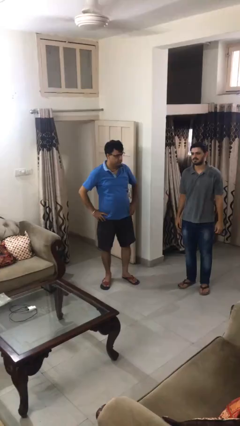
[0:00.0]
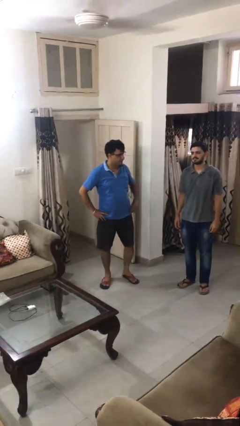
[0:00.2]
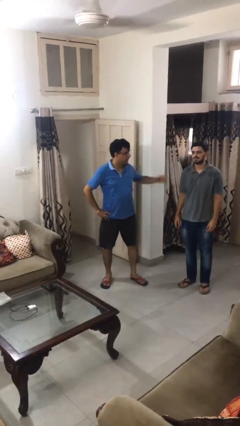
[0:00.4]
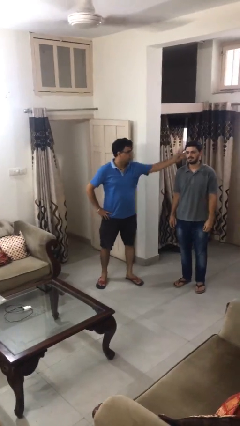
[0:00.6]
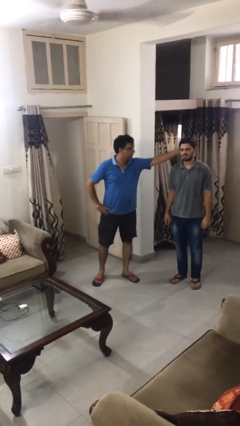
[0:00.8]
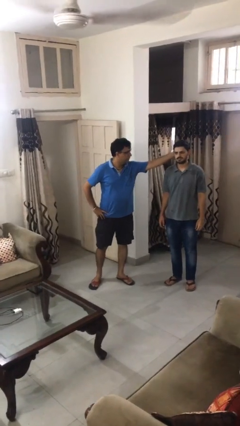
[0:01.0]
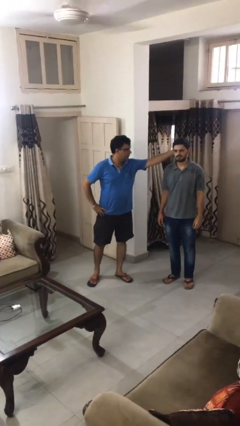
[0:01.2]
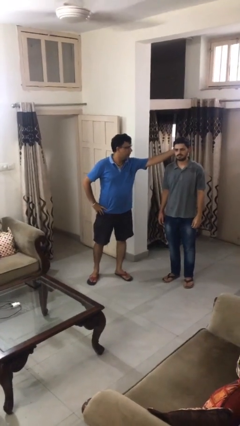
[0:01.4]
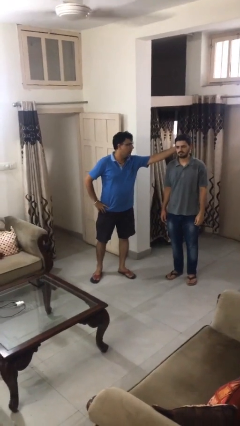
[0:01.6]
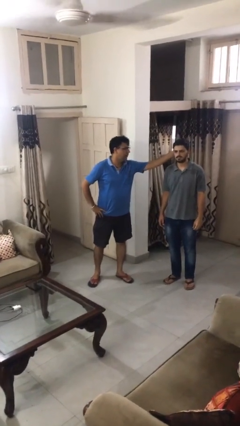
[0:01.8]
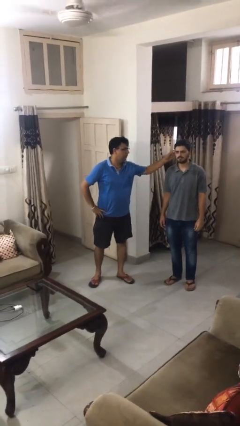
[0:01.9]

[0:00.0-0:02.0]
person grabs person by hair

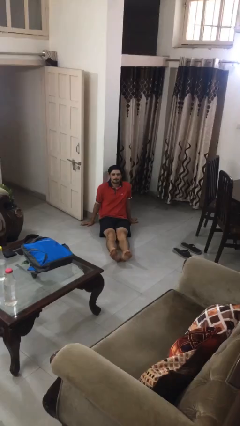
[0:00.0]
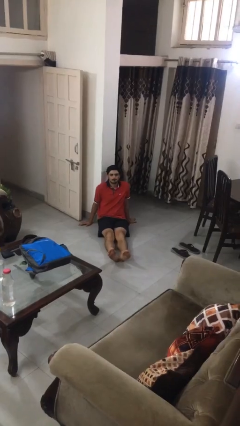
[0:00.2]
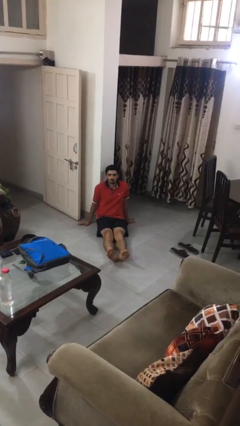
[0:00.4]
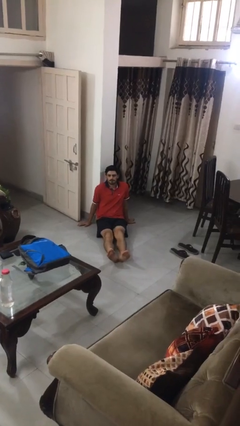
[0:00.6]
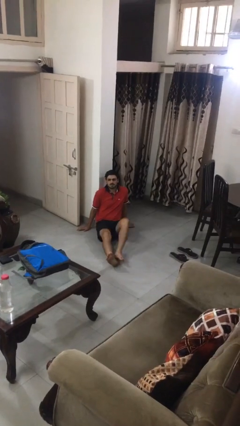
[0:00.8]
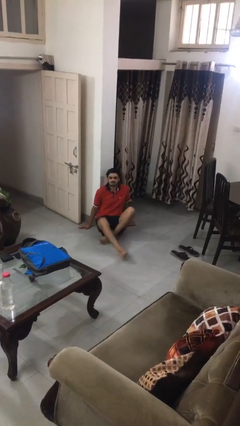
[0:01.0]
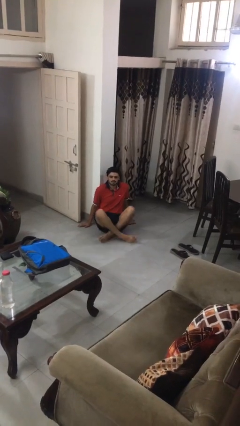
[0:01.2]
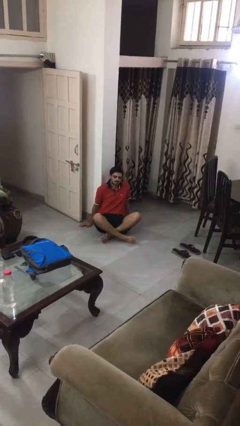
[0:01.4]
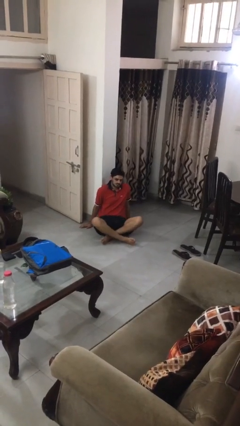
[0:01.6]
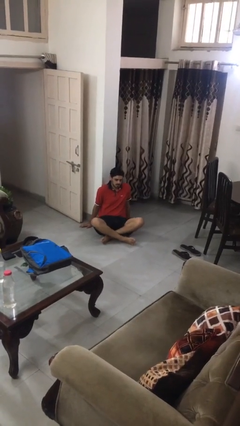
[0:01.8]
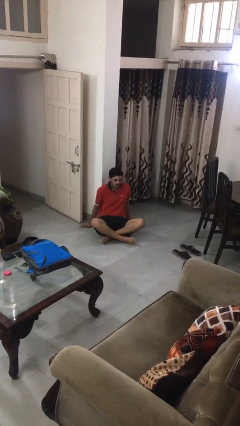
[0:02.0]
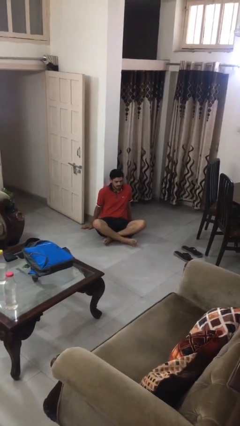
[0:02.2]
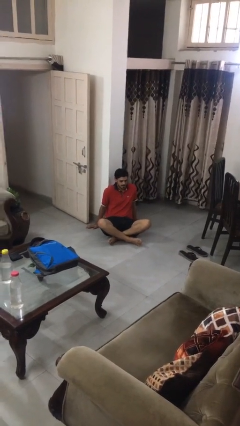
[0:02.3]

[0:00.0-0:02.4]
person crosses legs

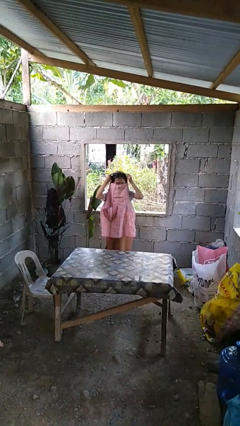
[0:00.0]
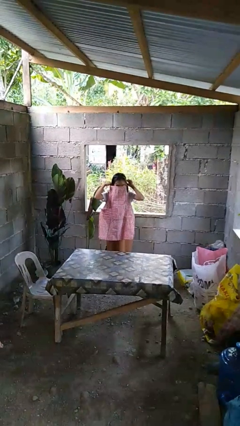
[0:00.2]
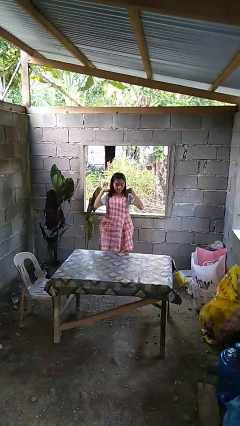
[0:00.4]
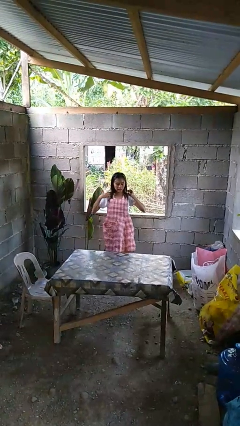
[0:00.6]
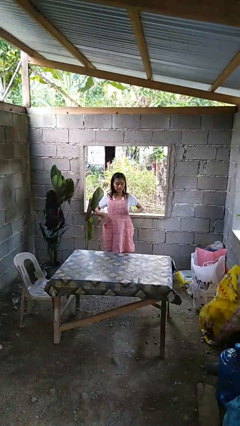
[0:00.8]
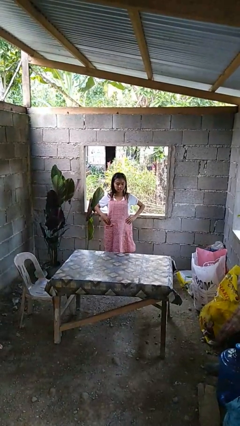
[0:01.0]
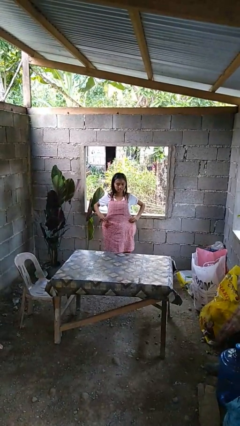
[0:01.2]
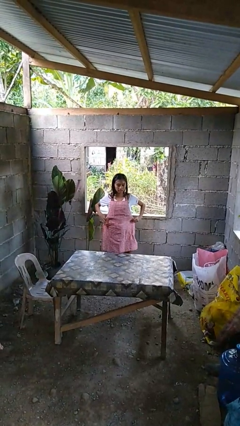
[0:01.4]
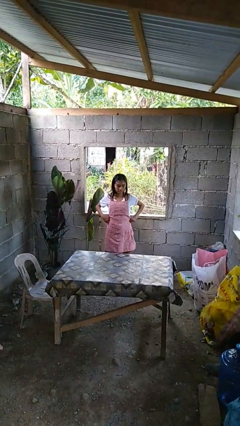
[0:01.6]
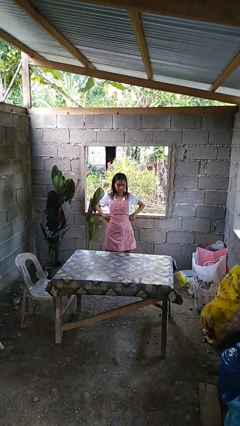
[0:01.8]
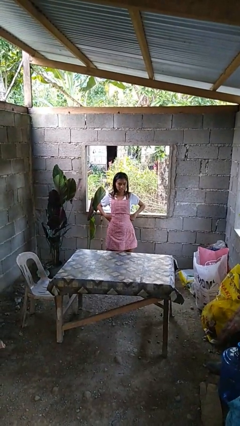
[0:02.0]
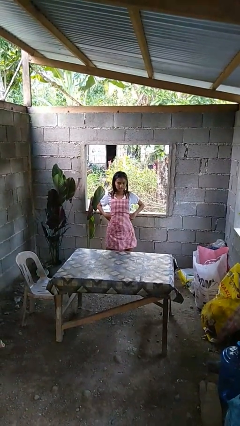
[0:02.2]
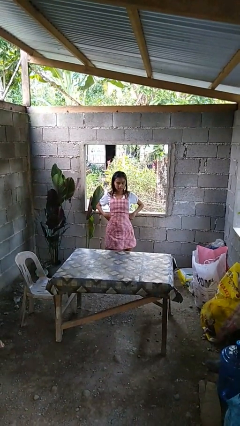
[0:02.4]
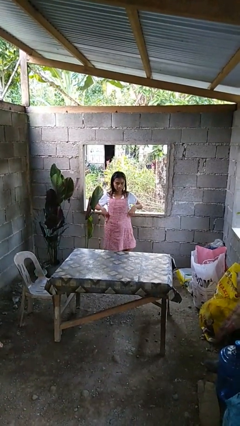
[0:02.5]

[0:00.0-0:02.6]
person puts on apron

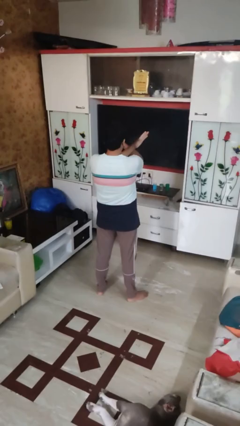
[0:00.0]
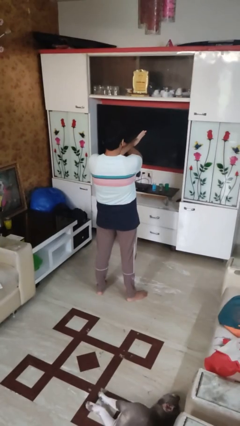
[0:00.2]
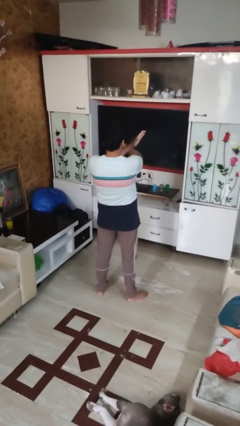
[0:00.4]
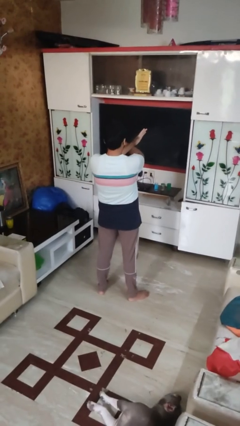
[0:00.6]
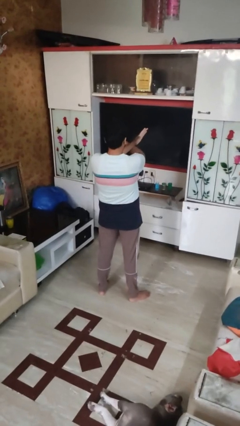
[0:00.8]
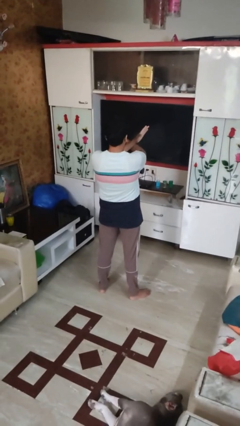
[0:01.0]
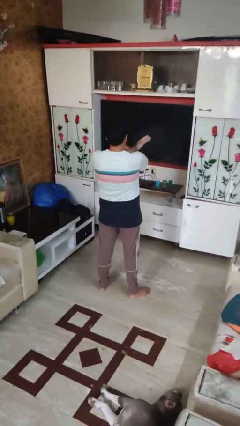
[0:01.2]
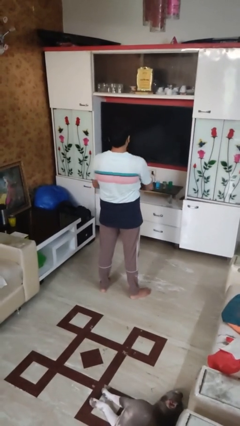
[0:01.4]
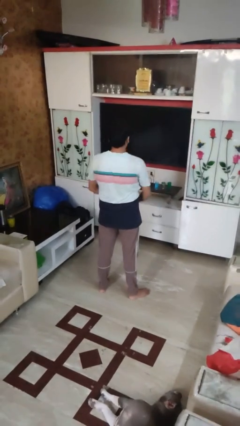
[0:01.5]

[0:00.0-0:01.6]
person gestures arms x

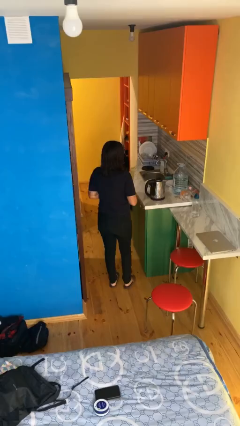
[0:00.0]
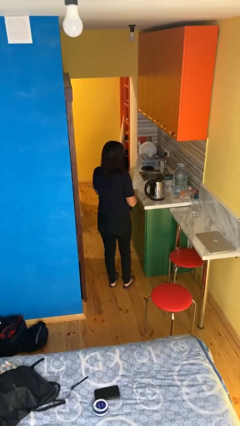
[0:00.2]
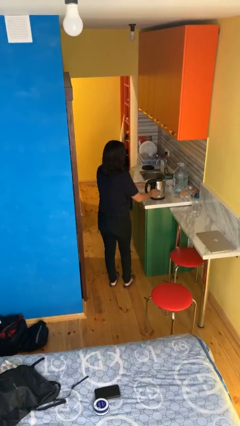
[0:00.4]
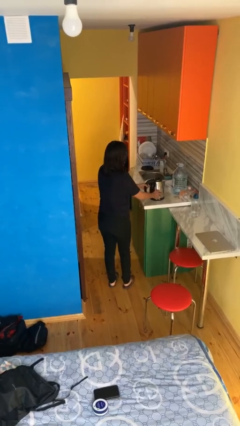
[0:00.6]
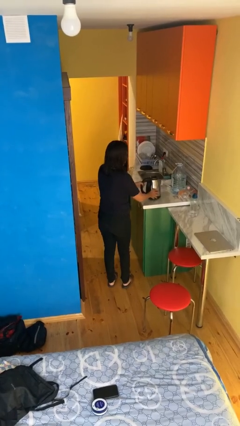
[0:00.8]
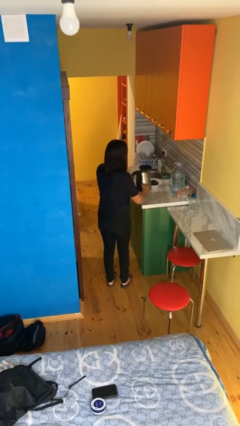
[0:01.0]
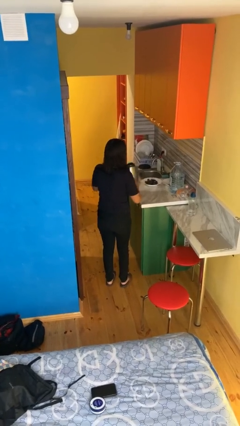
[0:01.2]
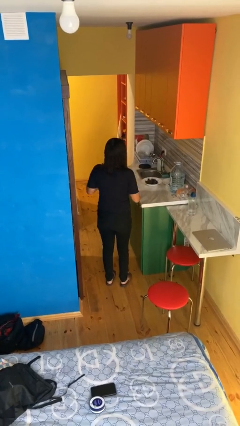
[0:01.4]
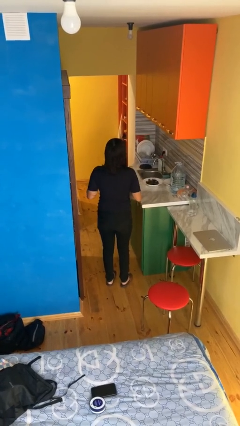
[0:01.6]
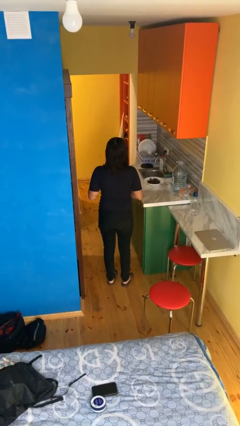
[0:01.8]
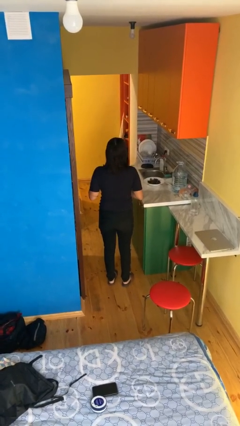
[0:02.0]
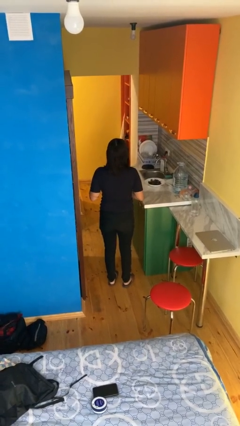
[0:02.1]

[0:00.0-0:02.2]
person picks up object from countertop

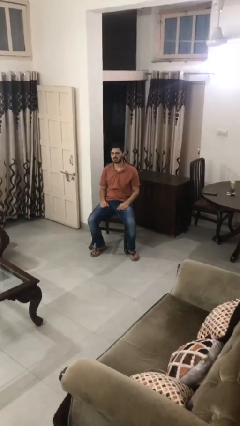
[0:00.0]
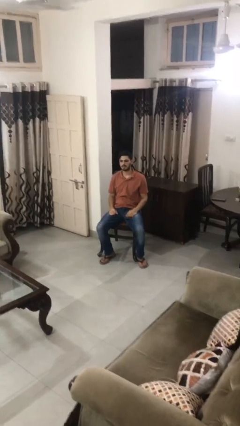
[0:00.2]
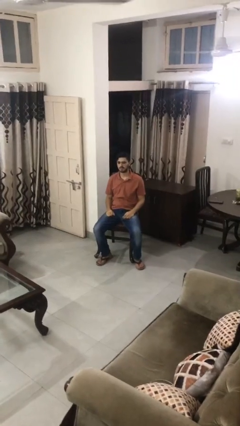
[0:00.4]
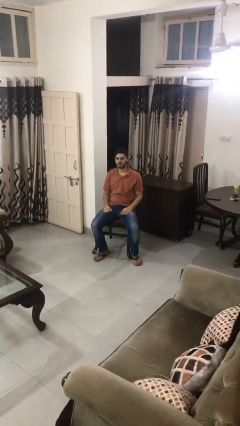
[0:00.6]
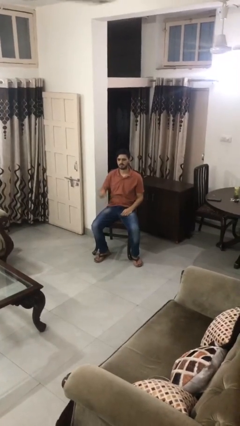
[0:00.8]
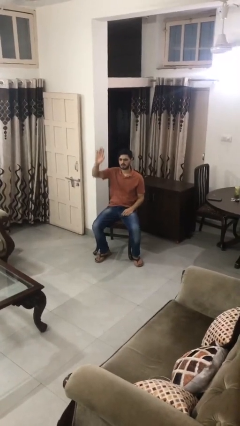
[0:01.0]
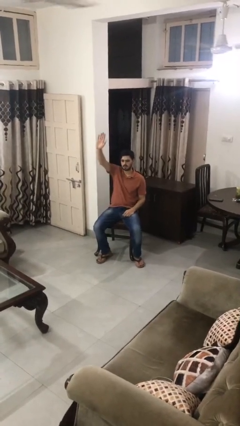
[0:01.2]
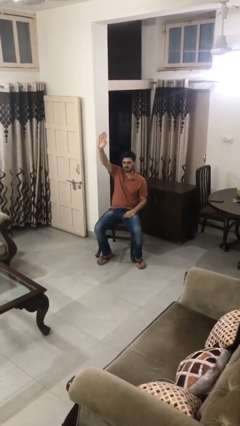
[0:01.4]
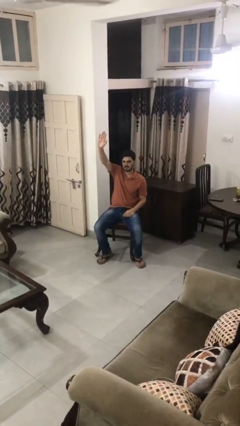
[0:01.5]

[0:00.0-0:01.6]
person gestures raise hand

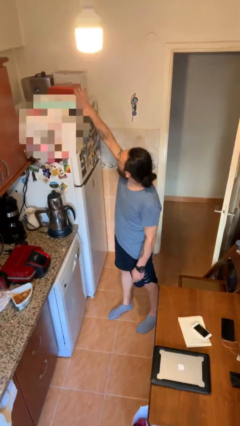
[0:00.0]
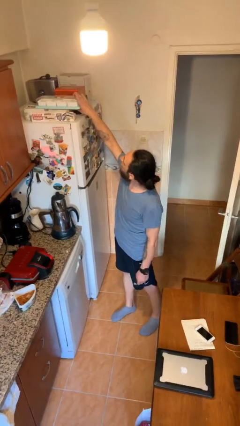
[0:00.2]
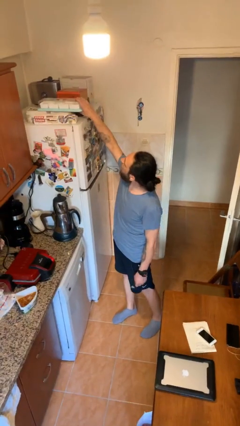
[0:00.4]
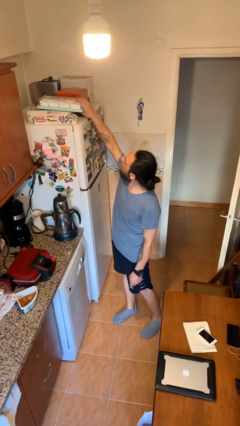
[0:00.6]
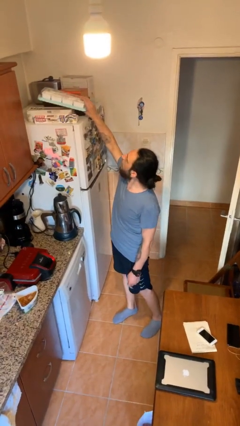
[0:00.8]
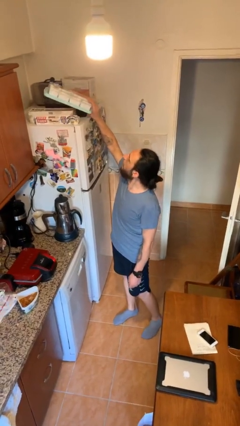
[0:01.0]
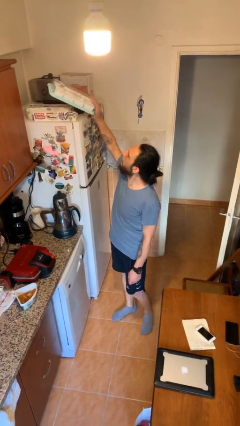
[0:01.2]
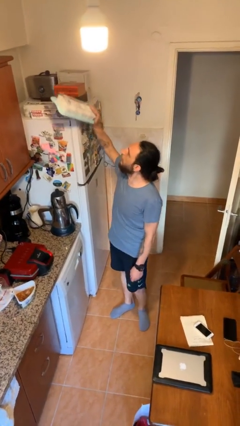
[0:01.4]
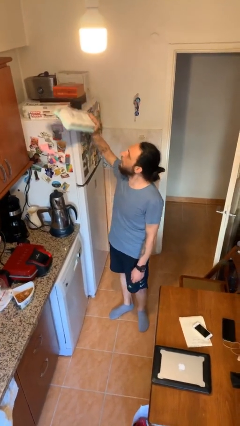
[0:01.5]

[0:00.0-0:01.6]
person picks up object from shelf

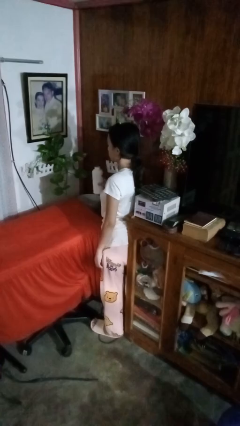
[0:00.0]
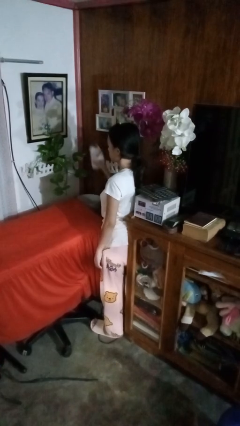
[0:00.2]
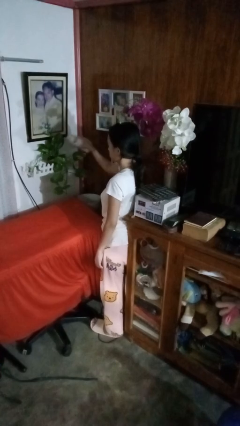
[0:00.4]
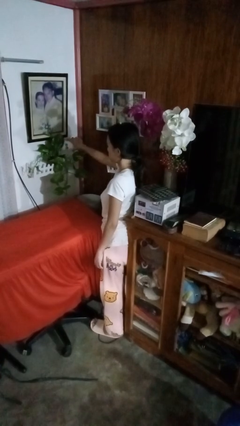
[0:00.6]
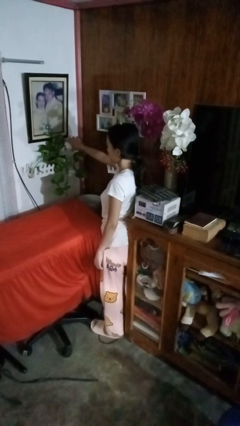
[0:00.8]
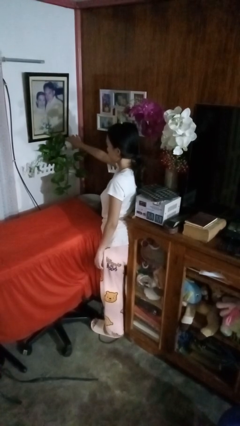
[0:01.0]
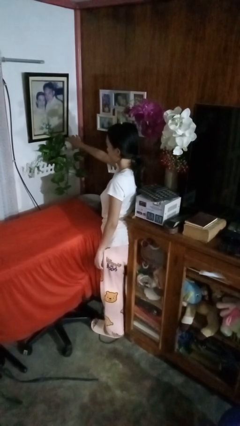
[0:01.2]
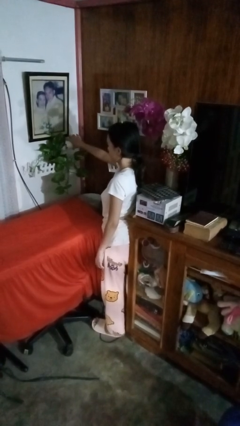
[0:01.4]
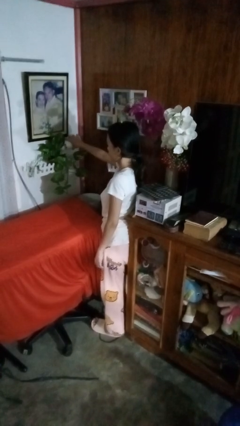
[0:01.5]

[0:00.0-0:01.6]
person waters houseplant

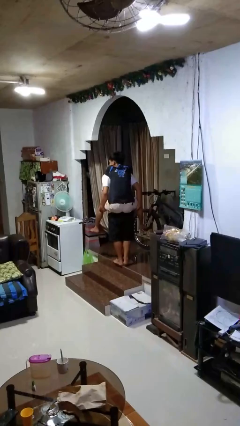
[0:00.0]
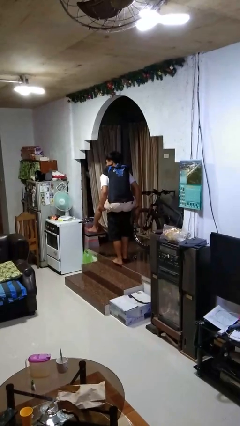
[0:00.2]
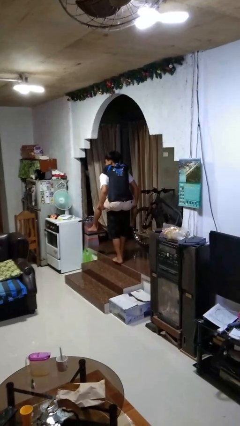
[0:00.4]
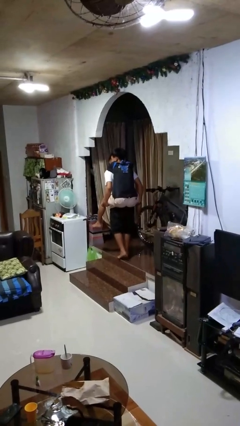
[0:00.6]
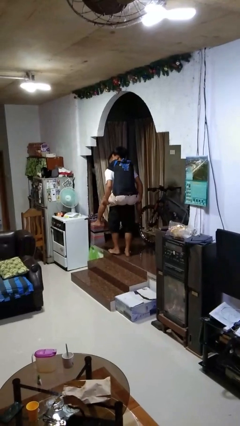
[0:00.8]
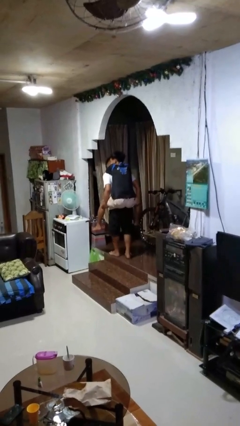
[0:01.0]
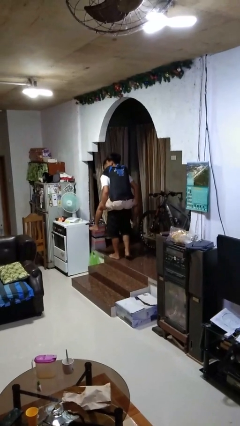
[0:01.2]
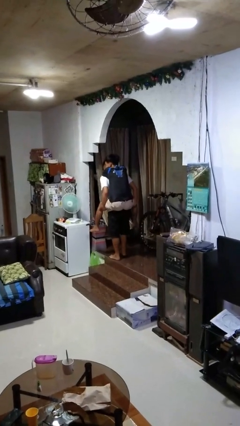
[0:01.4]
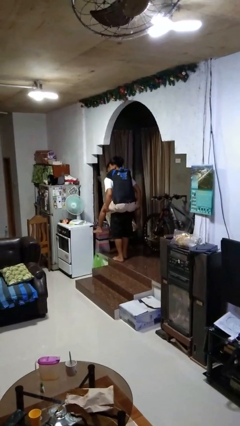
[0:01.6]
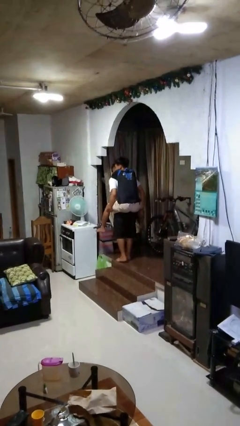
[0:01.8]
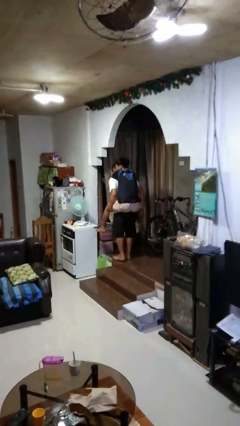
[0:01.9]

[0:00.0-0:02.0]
person carries person on back
